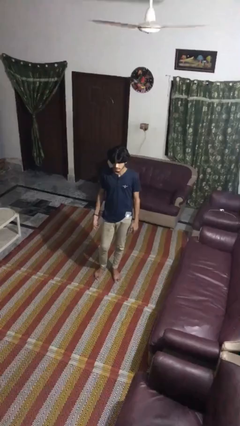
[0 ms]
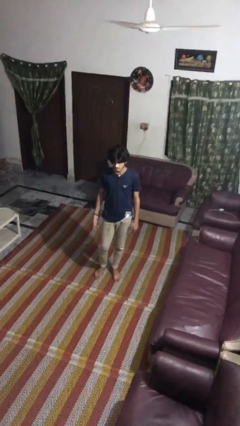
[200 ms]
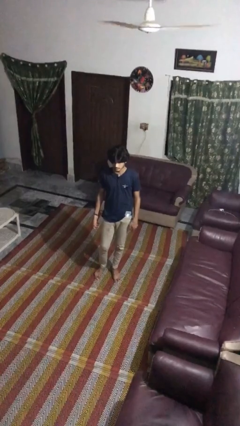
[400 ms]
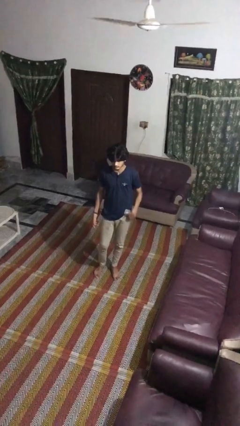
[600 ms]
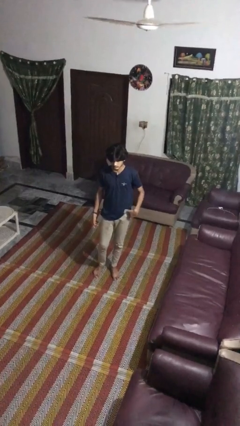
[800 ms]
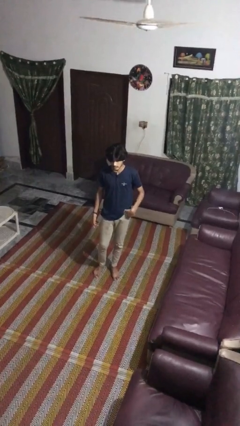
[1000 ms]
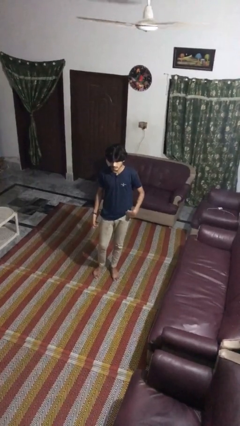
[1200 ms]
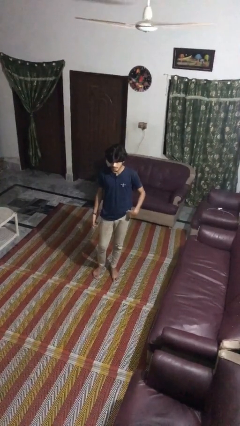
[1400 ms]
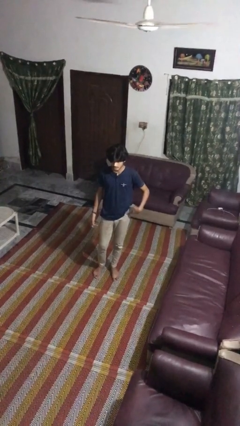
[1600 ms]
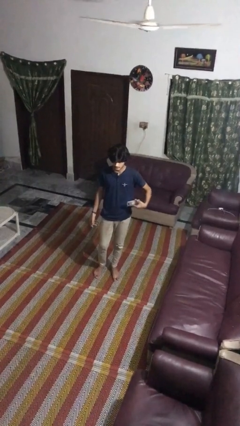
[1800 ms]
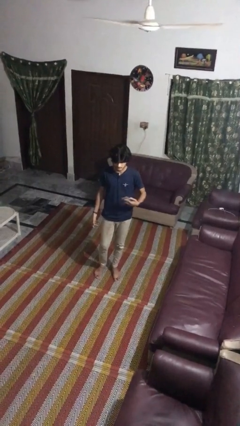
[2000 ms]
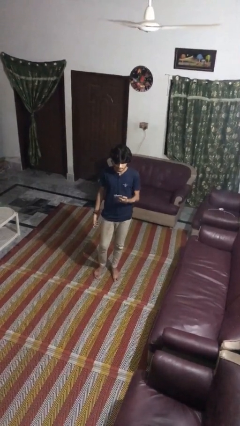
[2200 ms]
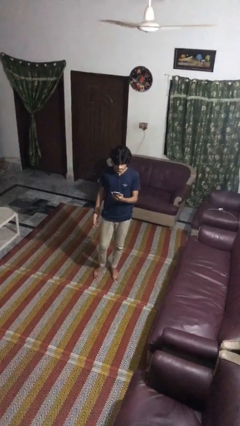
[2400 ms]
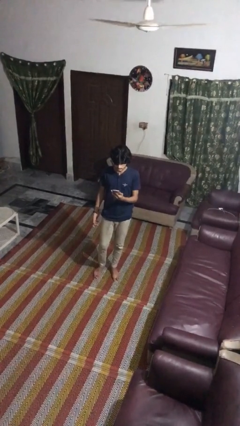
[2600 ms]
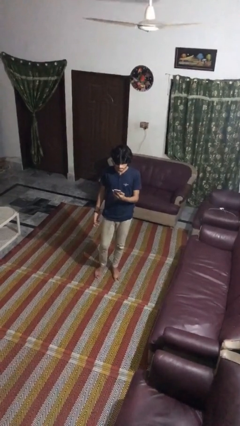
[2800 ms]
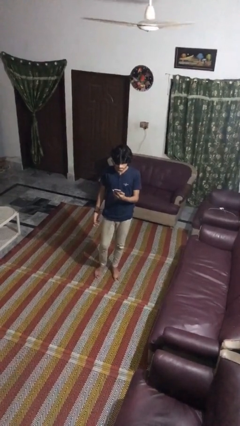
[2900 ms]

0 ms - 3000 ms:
person takes phone from pocket

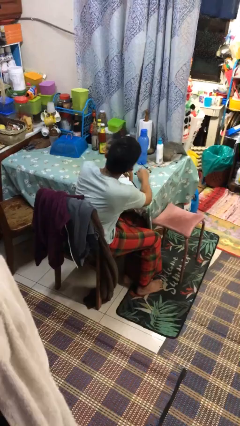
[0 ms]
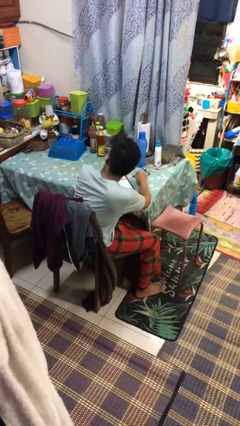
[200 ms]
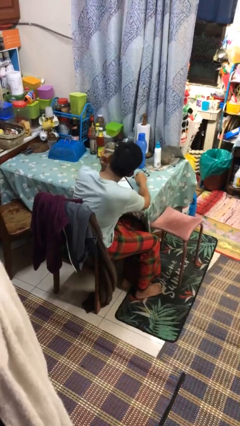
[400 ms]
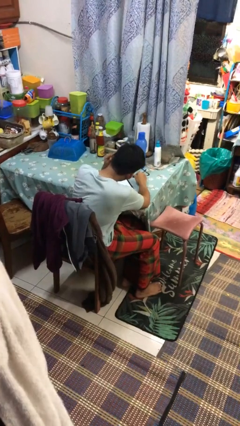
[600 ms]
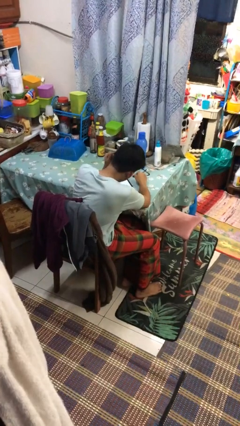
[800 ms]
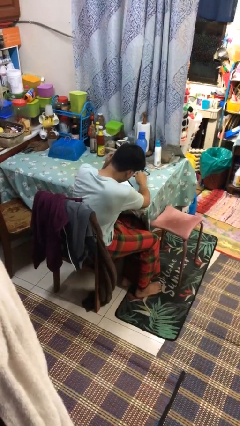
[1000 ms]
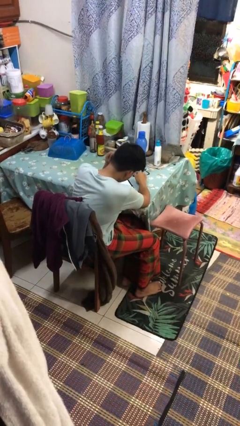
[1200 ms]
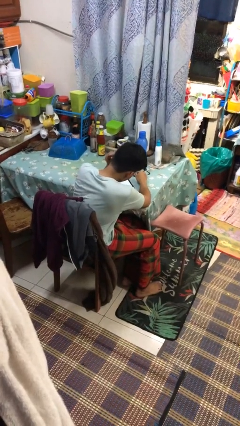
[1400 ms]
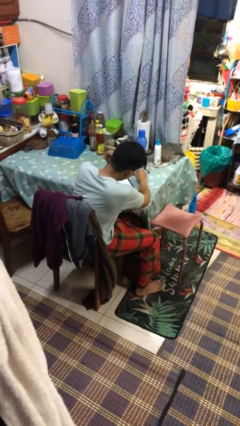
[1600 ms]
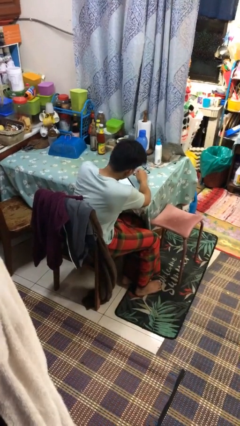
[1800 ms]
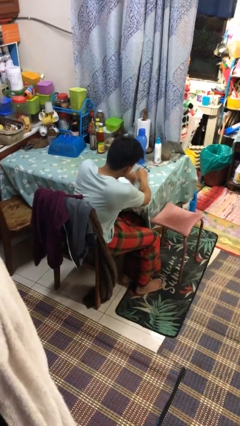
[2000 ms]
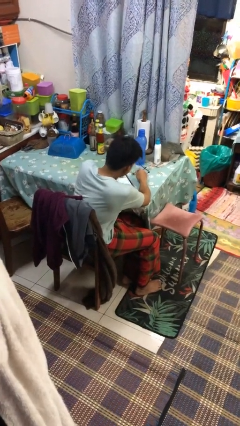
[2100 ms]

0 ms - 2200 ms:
person touches earlobe

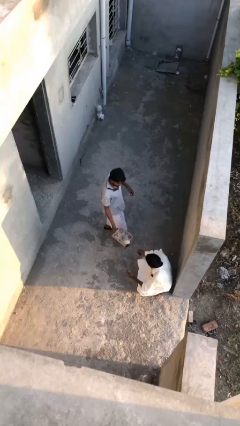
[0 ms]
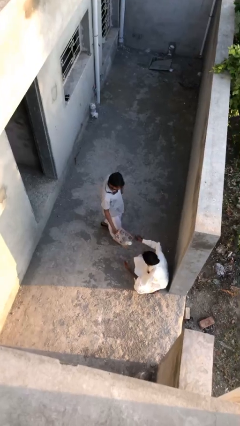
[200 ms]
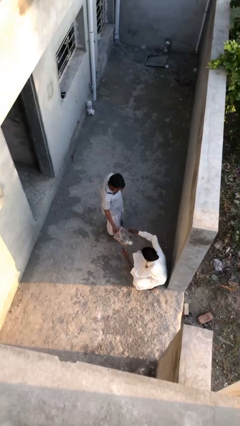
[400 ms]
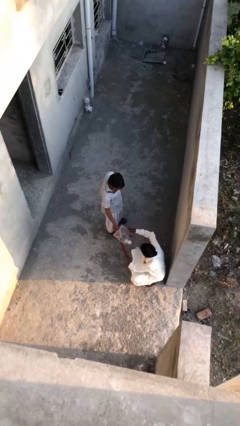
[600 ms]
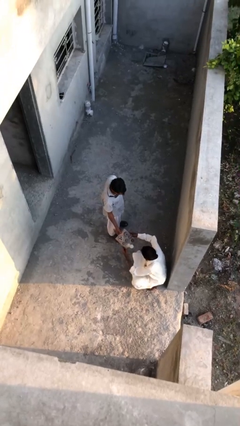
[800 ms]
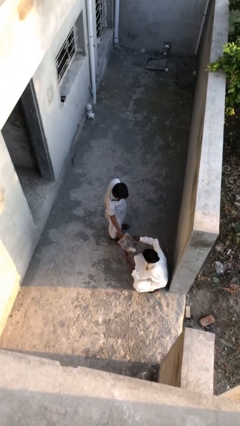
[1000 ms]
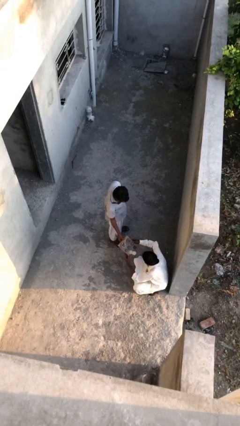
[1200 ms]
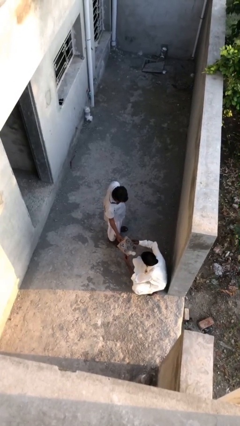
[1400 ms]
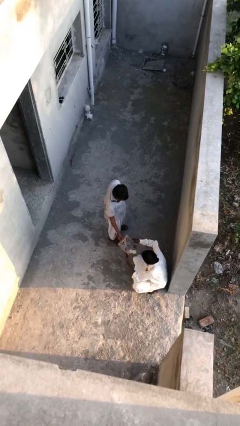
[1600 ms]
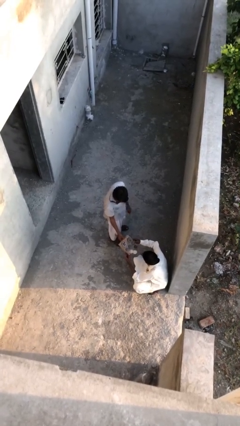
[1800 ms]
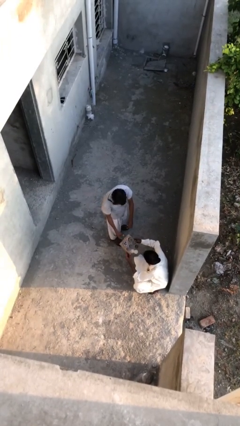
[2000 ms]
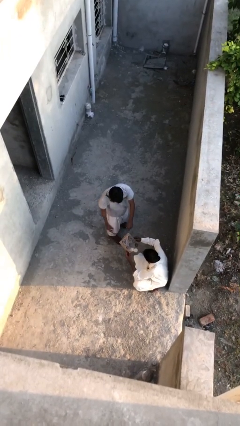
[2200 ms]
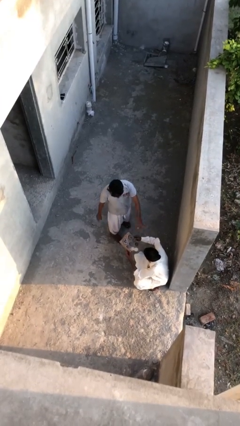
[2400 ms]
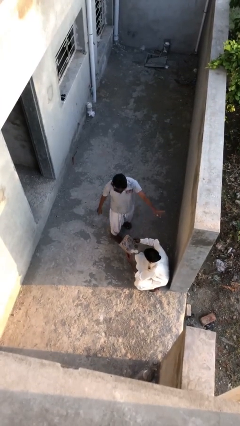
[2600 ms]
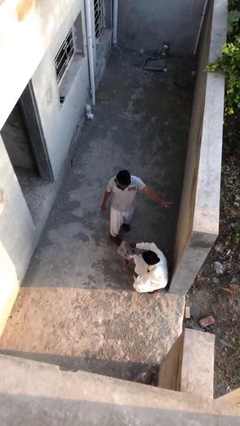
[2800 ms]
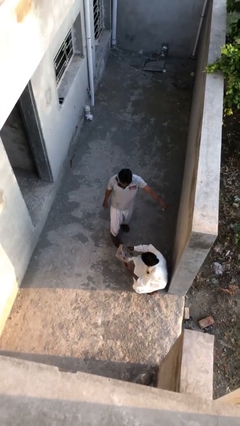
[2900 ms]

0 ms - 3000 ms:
person transfers object to person

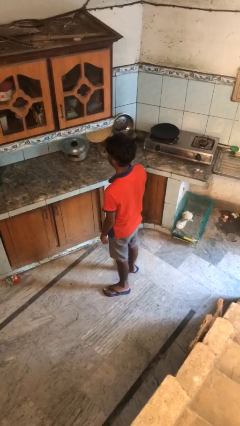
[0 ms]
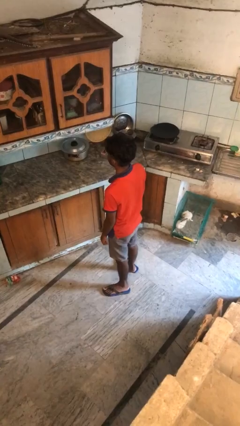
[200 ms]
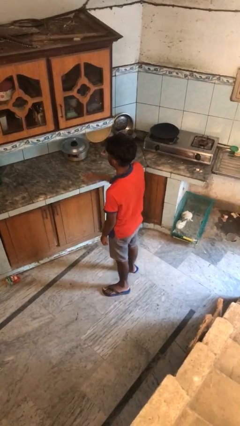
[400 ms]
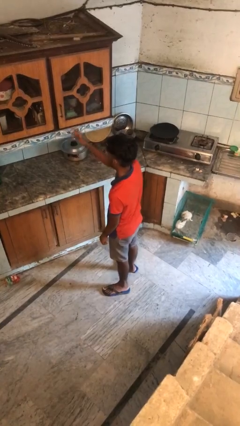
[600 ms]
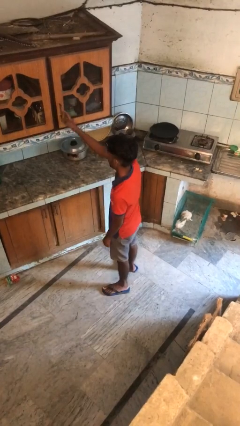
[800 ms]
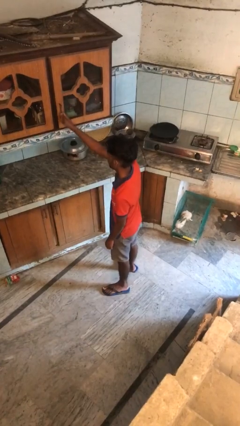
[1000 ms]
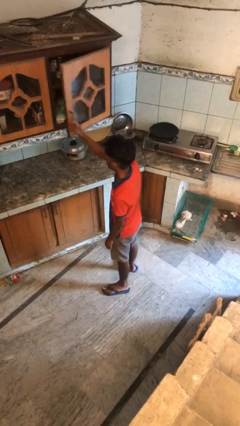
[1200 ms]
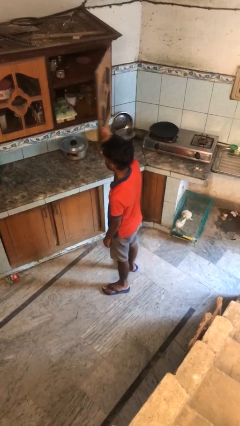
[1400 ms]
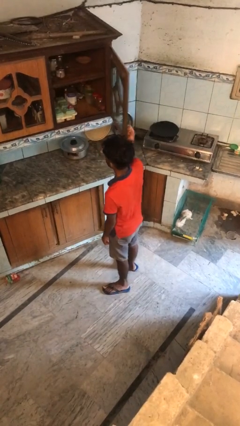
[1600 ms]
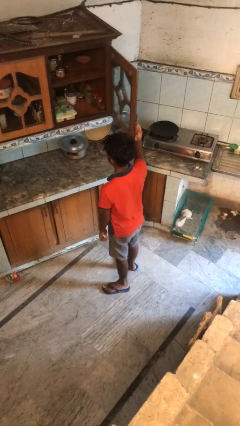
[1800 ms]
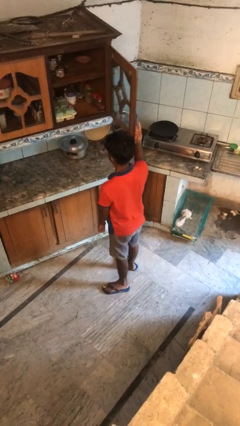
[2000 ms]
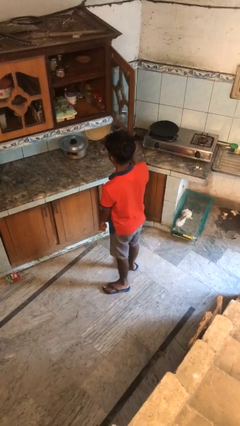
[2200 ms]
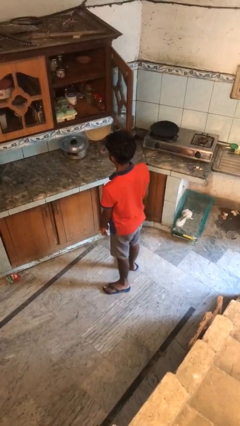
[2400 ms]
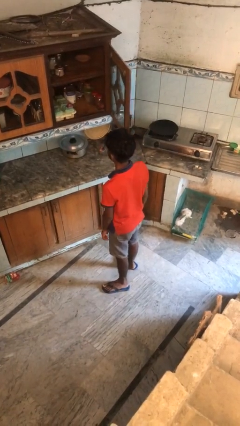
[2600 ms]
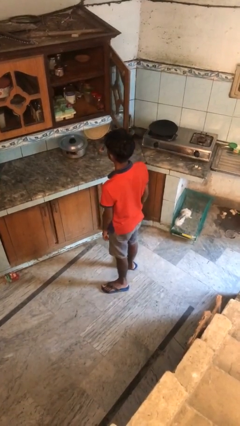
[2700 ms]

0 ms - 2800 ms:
person opens cabinet

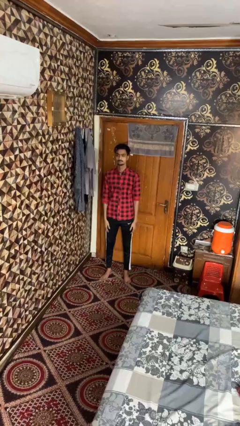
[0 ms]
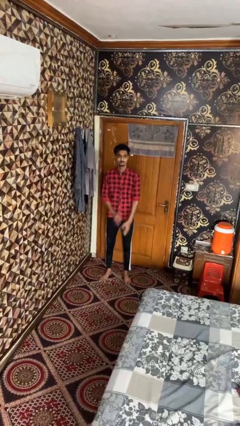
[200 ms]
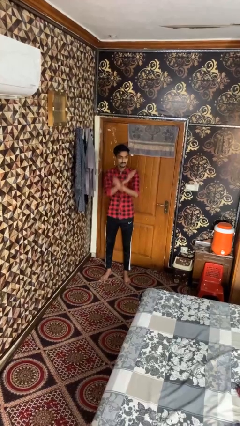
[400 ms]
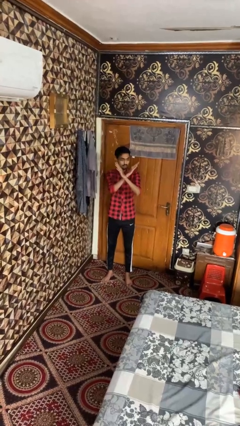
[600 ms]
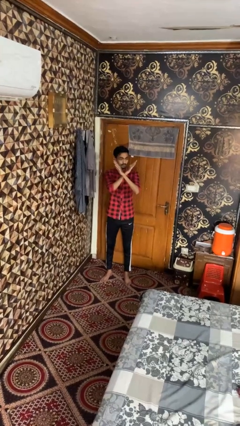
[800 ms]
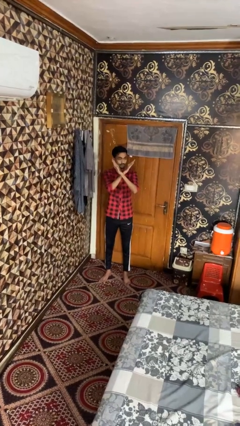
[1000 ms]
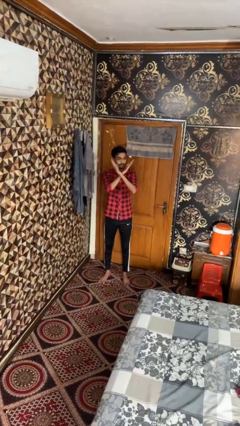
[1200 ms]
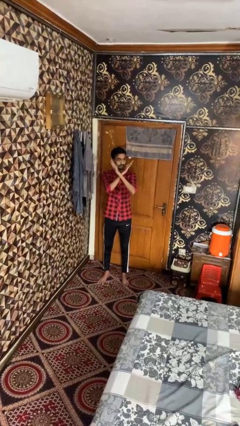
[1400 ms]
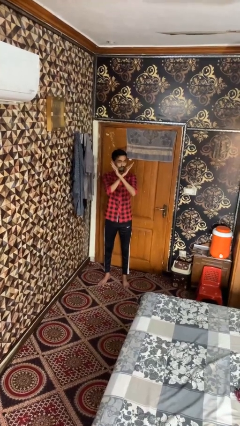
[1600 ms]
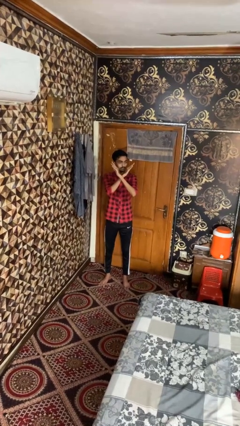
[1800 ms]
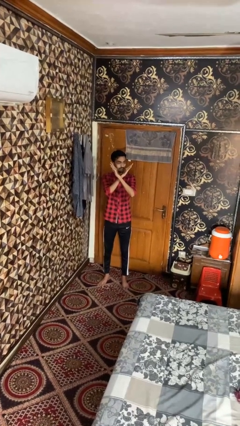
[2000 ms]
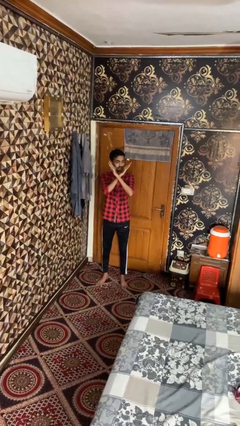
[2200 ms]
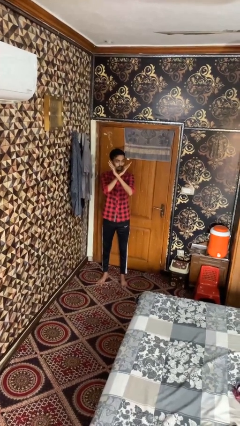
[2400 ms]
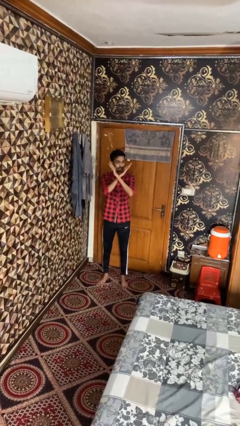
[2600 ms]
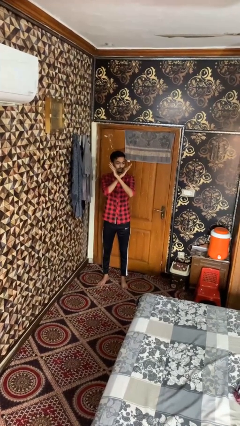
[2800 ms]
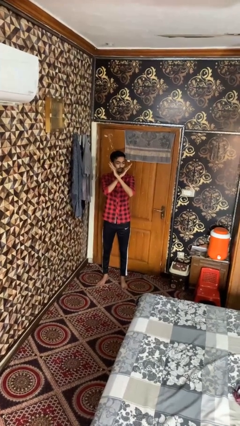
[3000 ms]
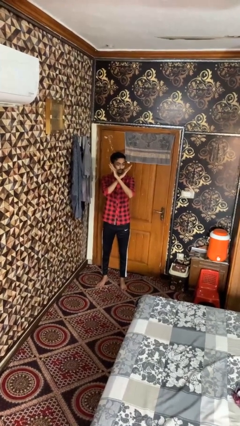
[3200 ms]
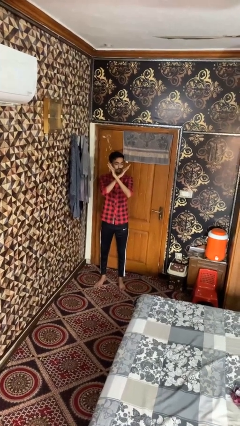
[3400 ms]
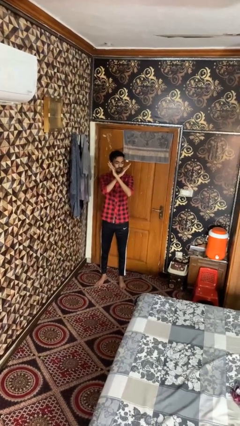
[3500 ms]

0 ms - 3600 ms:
person gestures arms x

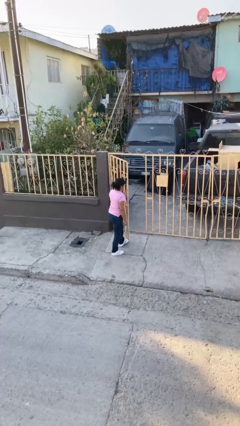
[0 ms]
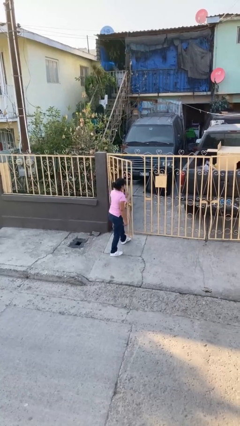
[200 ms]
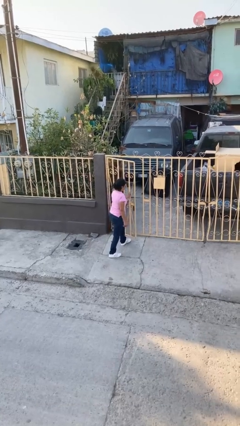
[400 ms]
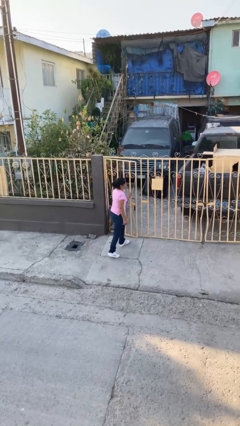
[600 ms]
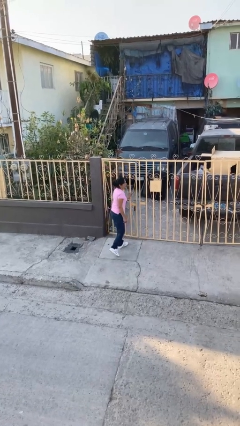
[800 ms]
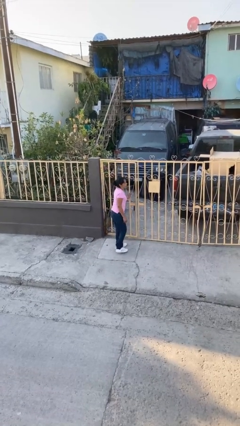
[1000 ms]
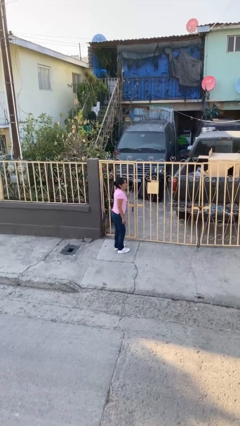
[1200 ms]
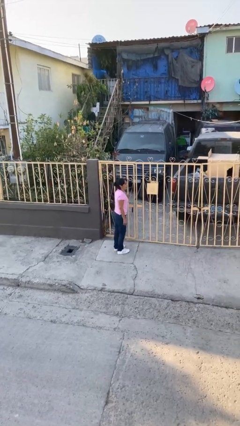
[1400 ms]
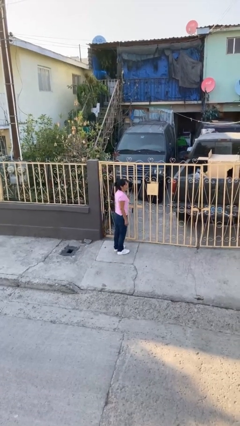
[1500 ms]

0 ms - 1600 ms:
person closes facility door

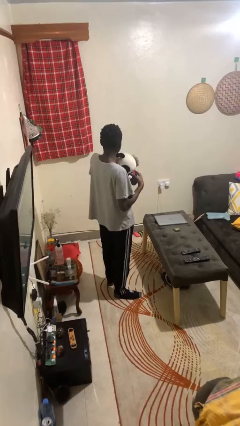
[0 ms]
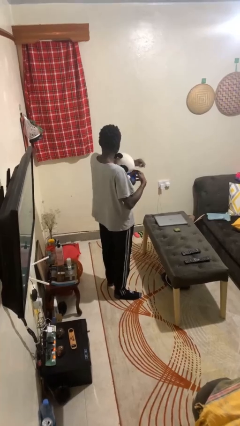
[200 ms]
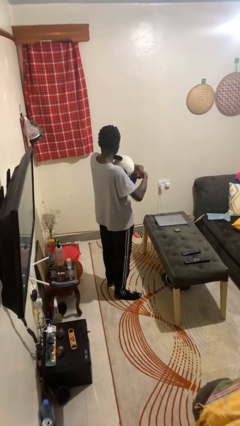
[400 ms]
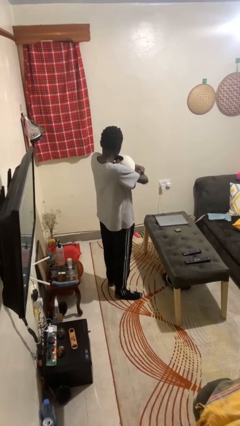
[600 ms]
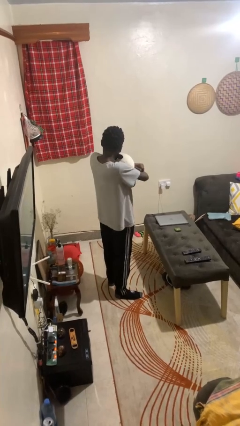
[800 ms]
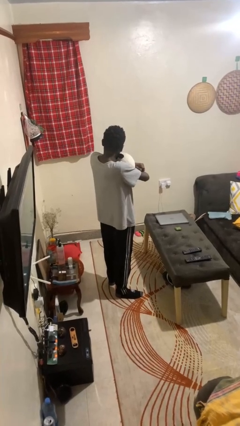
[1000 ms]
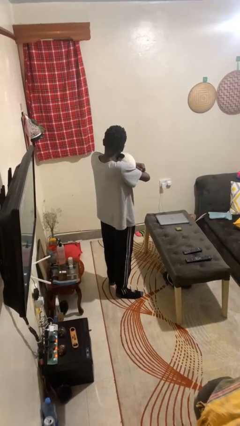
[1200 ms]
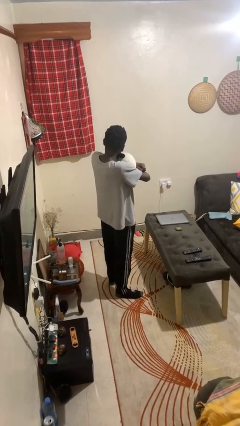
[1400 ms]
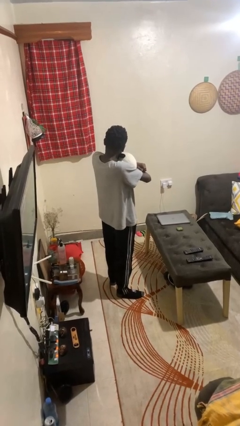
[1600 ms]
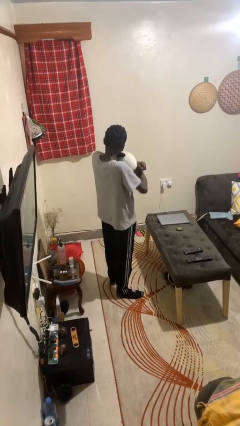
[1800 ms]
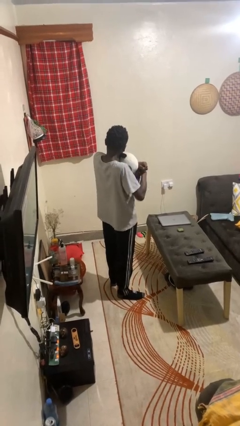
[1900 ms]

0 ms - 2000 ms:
person hugs stuffed animal
